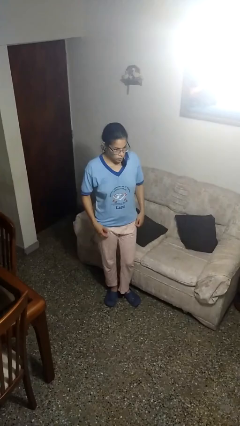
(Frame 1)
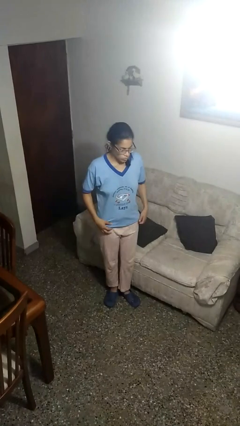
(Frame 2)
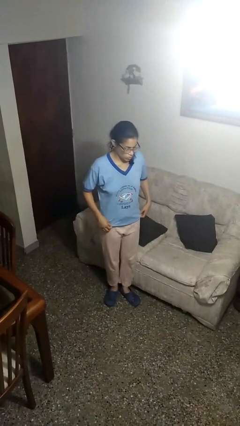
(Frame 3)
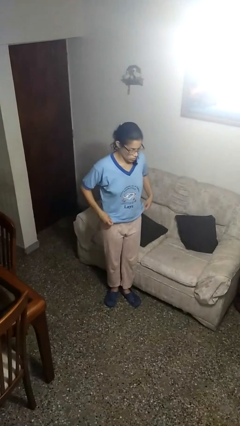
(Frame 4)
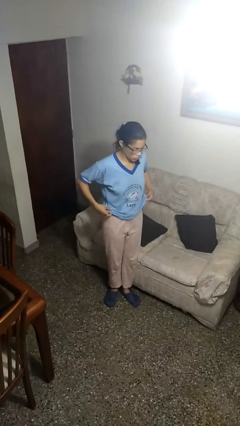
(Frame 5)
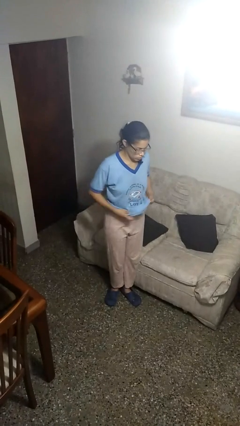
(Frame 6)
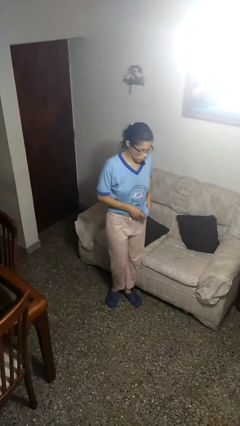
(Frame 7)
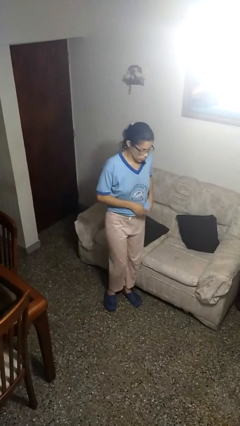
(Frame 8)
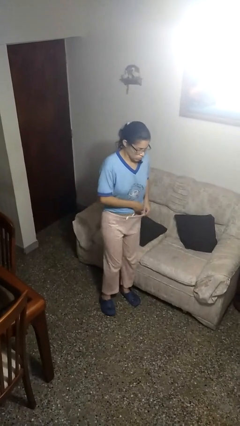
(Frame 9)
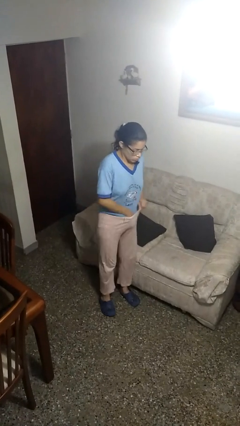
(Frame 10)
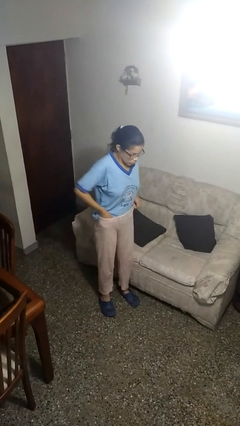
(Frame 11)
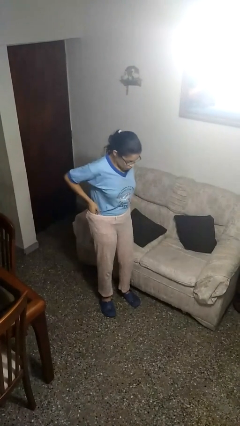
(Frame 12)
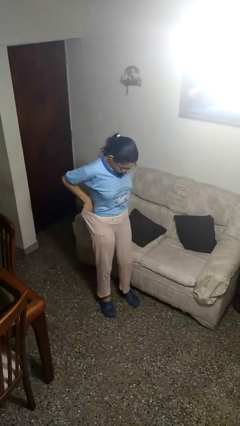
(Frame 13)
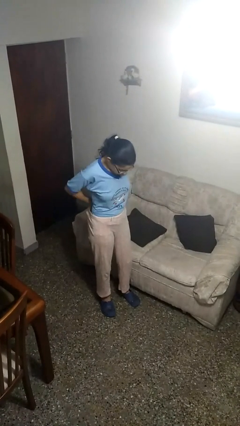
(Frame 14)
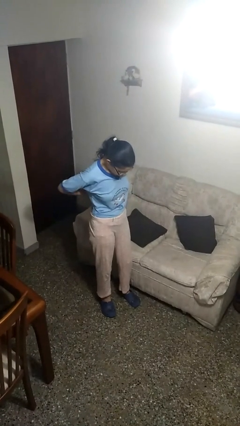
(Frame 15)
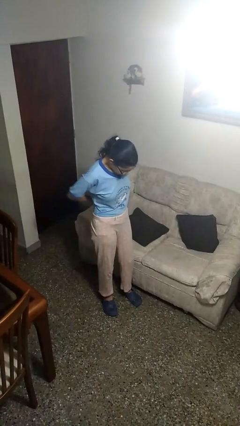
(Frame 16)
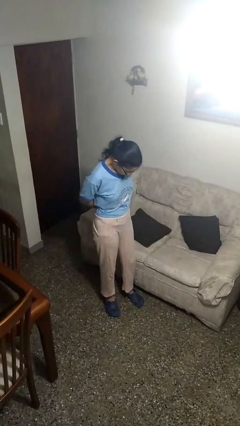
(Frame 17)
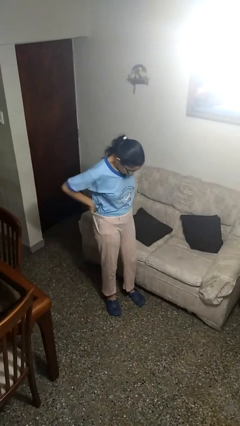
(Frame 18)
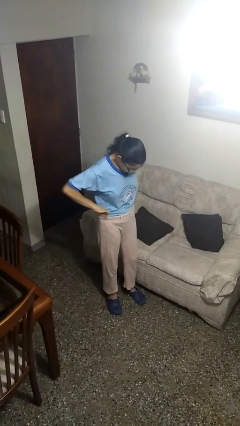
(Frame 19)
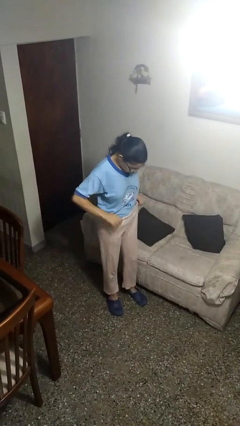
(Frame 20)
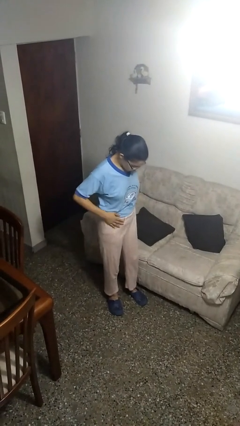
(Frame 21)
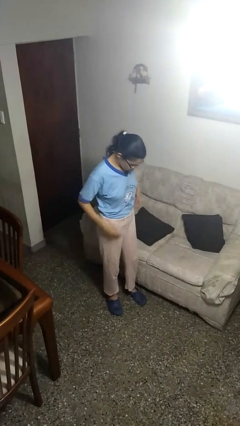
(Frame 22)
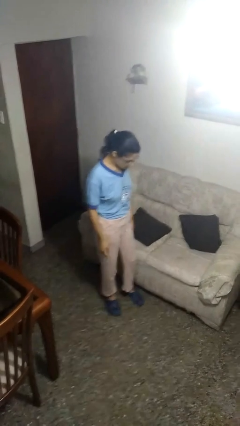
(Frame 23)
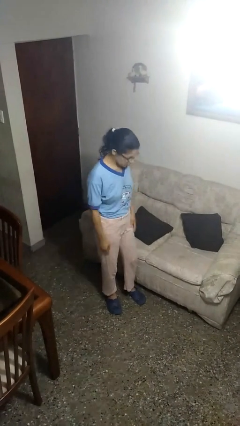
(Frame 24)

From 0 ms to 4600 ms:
person tucks in shirt

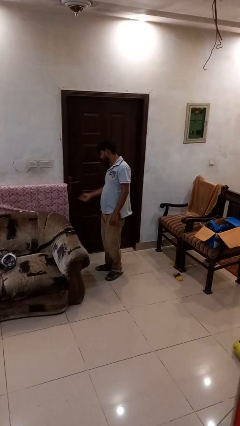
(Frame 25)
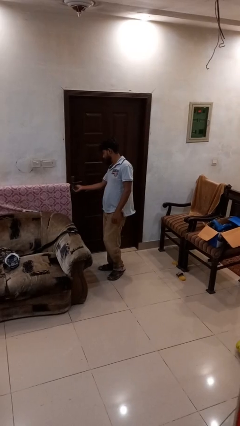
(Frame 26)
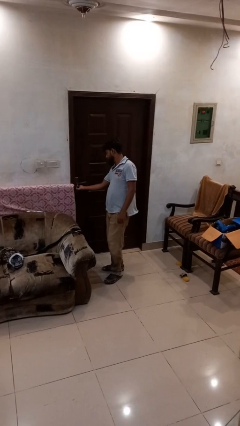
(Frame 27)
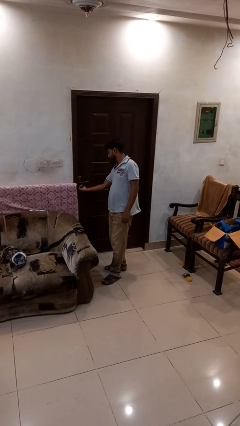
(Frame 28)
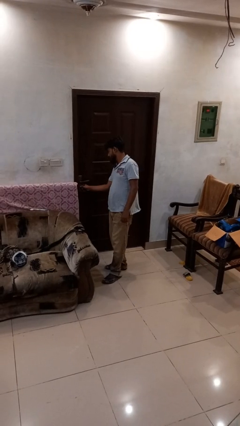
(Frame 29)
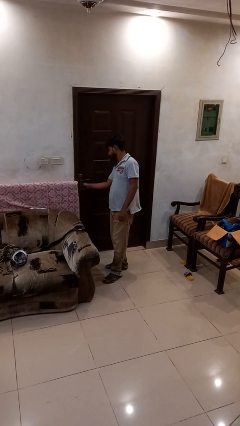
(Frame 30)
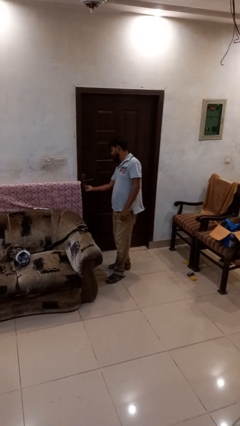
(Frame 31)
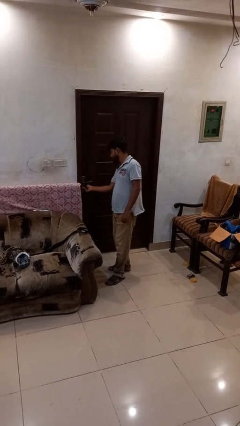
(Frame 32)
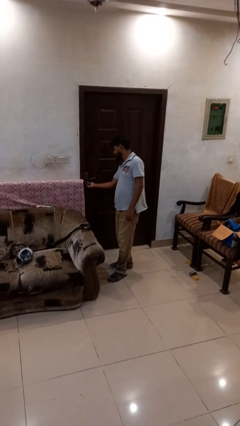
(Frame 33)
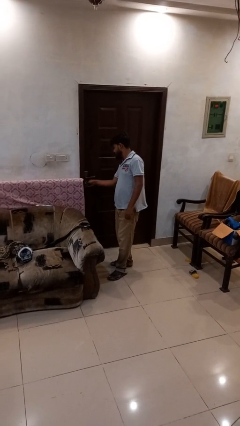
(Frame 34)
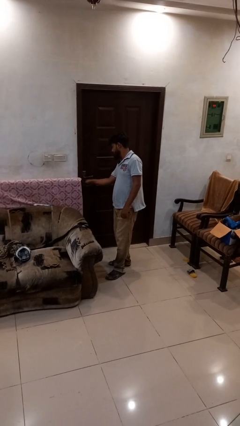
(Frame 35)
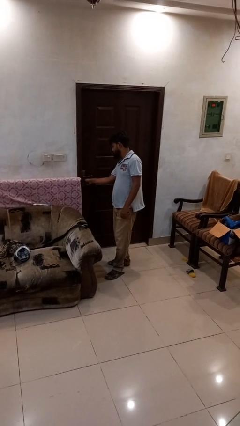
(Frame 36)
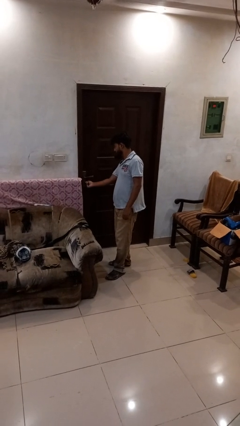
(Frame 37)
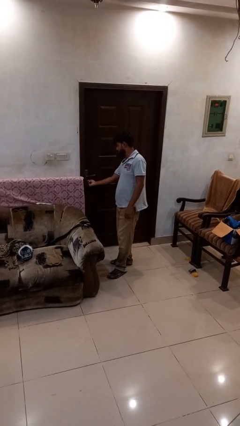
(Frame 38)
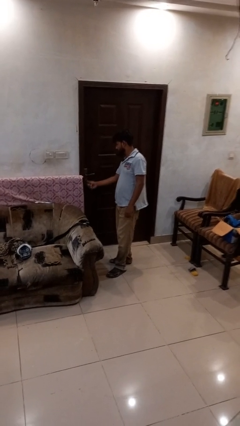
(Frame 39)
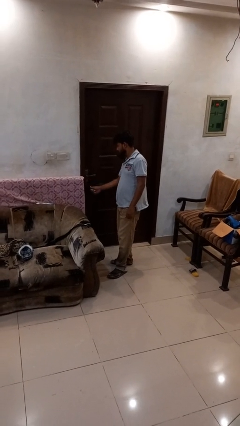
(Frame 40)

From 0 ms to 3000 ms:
person unlocks door with keys

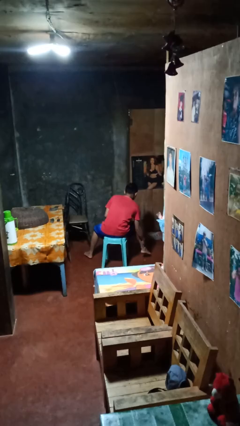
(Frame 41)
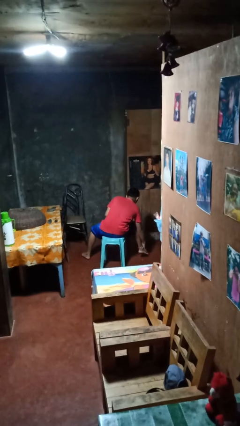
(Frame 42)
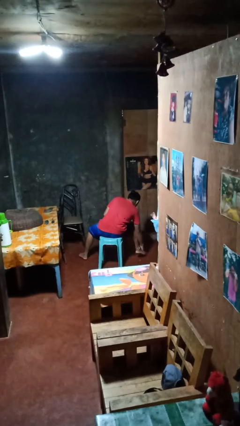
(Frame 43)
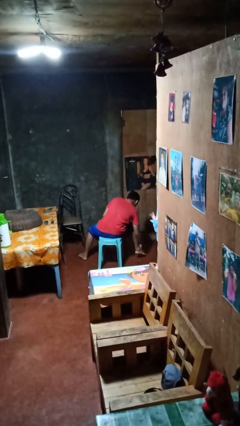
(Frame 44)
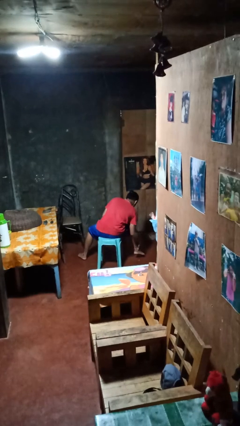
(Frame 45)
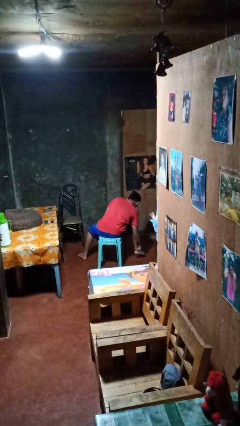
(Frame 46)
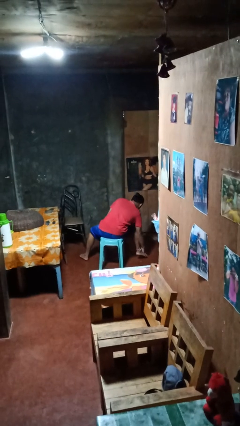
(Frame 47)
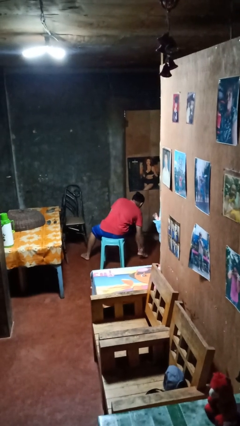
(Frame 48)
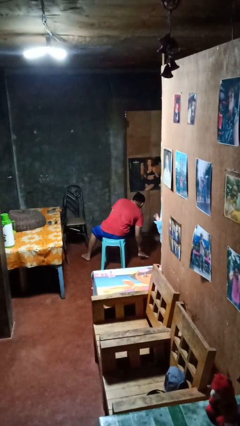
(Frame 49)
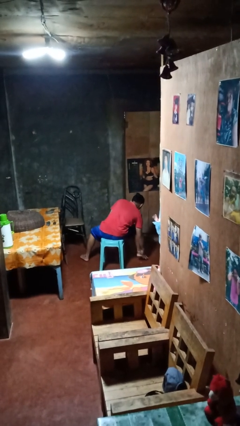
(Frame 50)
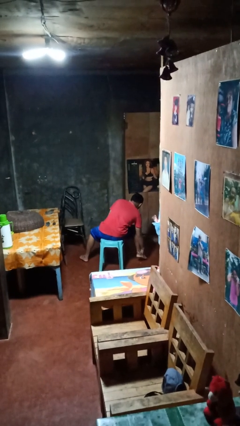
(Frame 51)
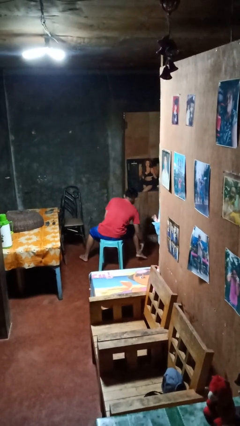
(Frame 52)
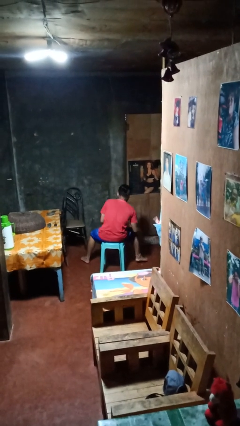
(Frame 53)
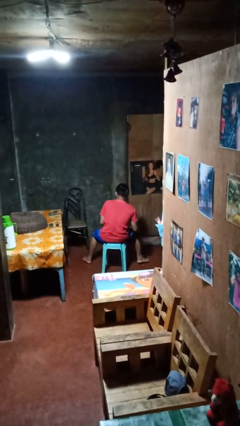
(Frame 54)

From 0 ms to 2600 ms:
person rubs foot

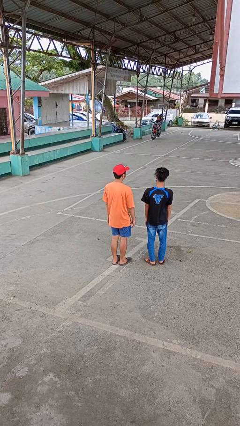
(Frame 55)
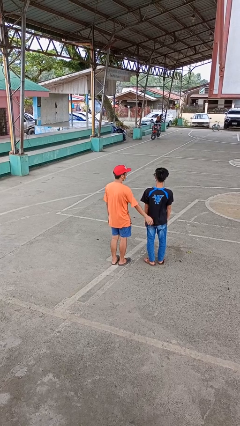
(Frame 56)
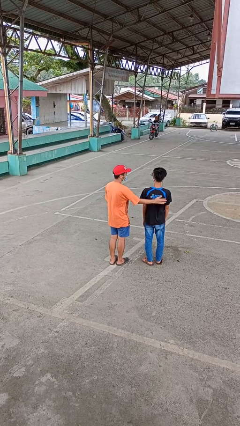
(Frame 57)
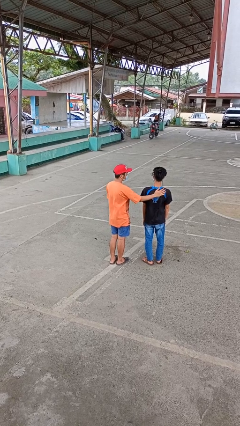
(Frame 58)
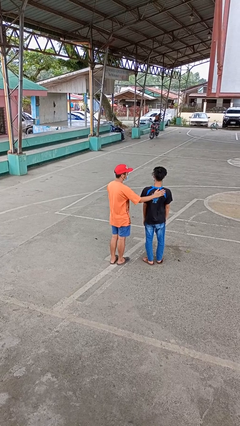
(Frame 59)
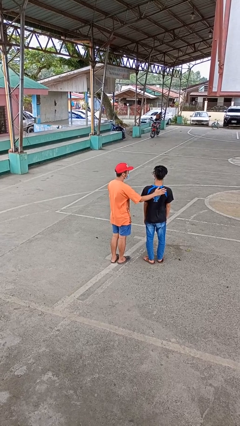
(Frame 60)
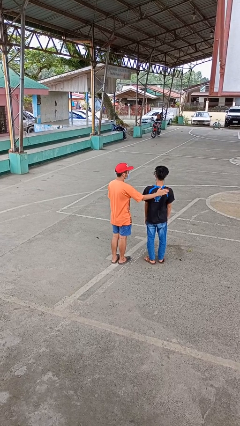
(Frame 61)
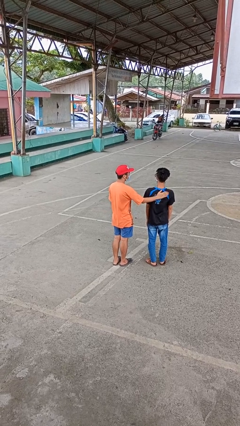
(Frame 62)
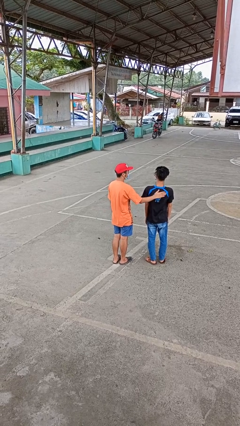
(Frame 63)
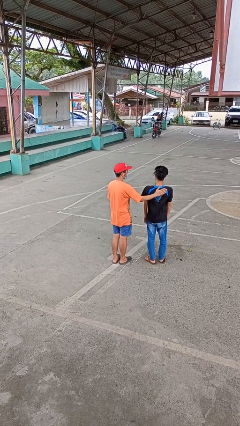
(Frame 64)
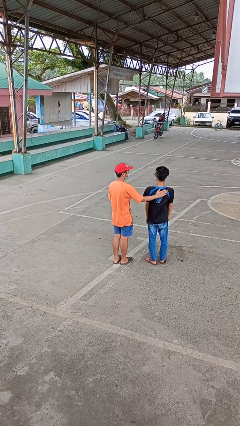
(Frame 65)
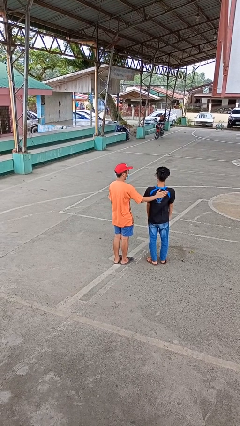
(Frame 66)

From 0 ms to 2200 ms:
person touches back of person

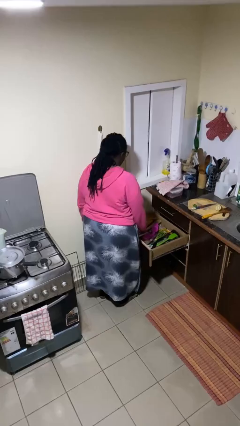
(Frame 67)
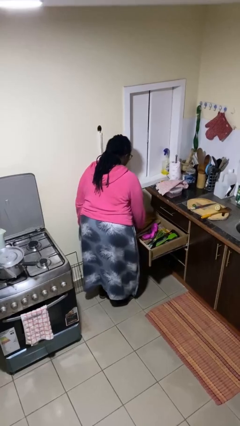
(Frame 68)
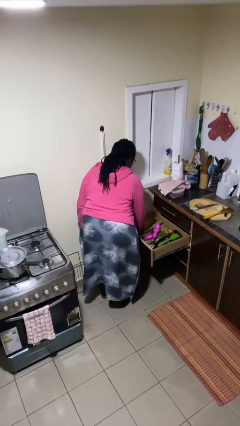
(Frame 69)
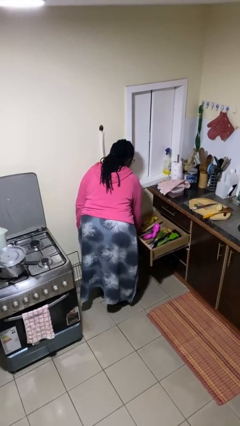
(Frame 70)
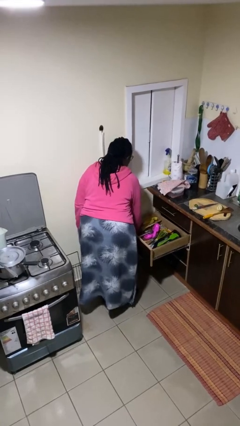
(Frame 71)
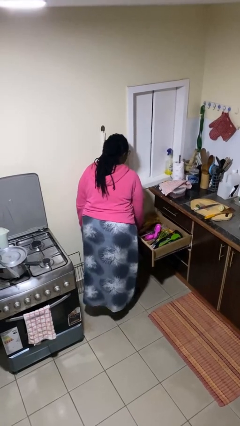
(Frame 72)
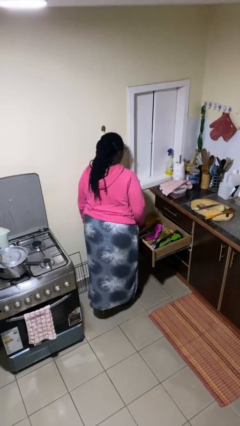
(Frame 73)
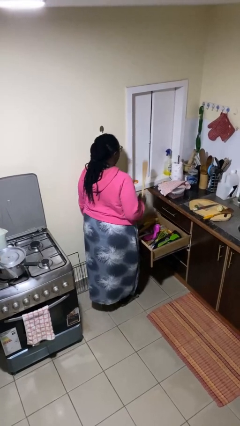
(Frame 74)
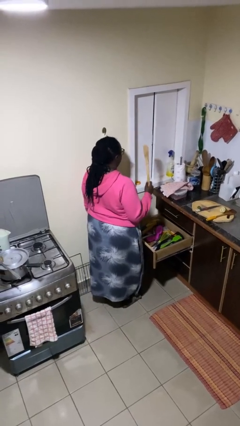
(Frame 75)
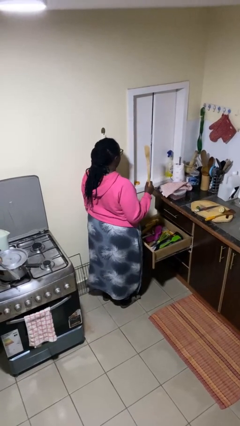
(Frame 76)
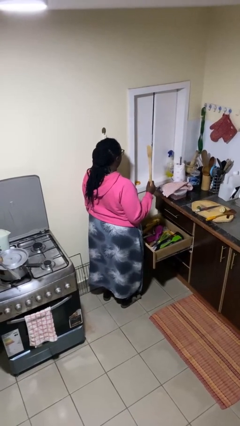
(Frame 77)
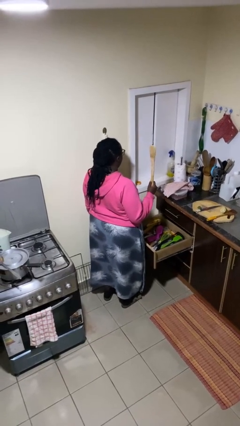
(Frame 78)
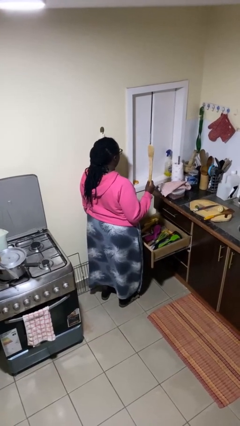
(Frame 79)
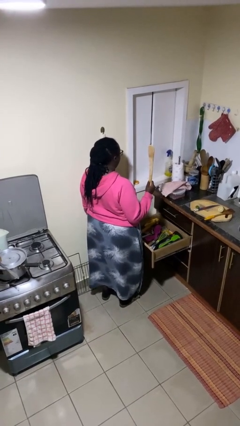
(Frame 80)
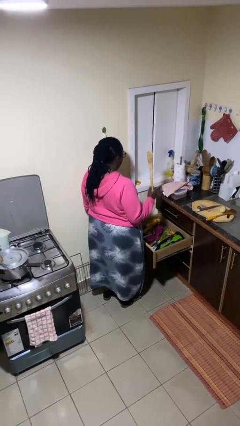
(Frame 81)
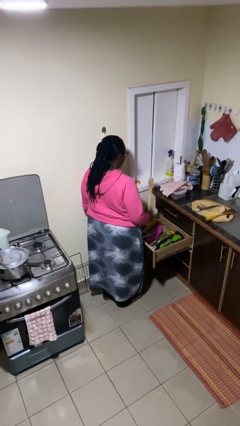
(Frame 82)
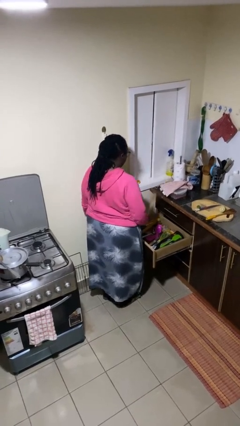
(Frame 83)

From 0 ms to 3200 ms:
person takes object from kitchen drawer

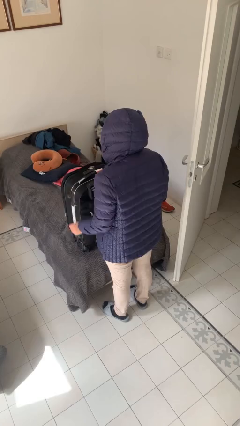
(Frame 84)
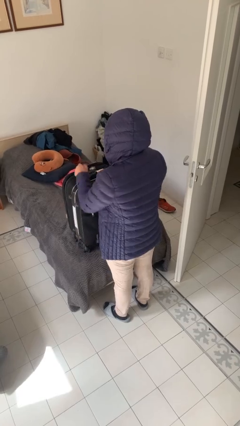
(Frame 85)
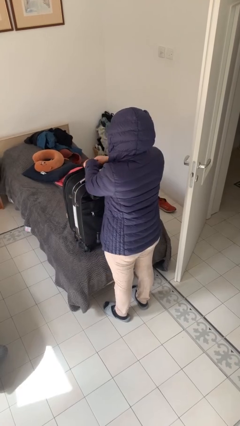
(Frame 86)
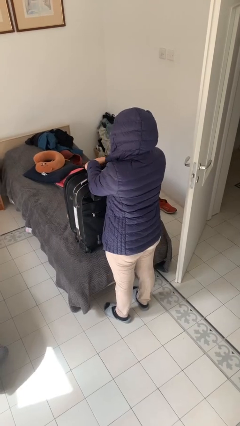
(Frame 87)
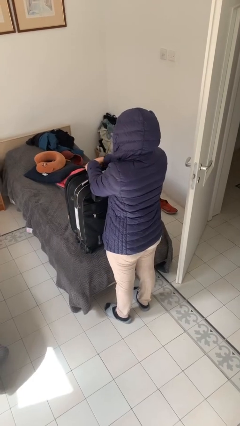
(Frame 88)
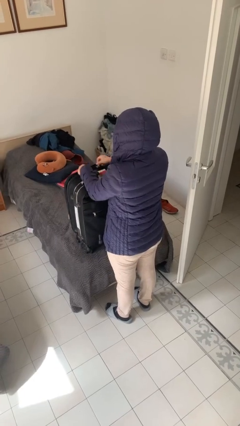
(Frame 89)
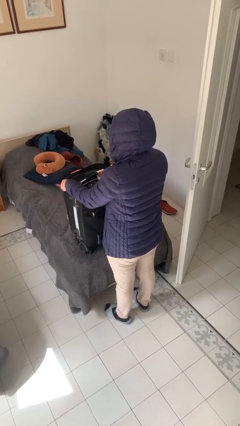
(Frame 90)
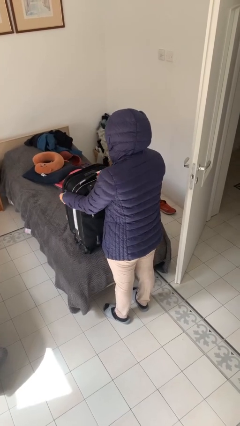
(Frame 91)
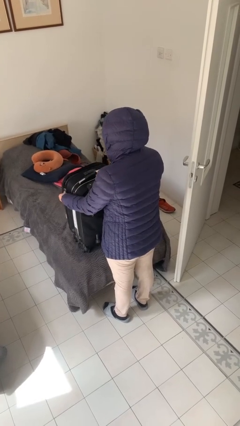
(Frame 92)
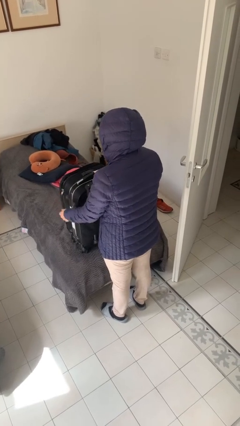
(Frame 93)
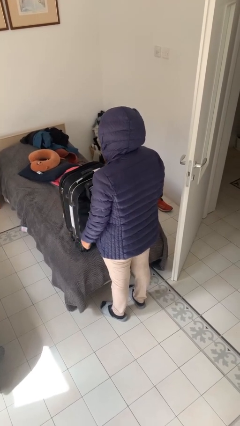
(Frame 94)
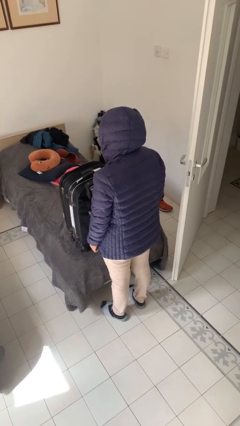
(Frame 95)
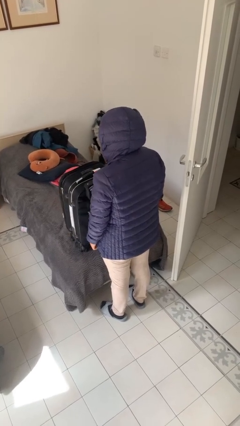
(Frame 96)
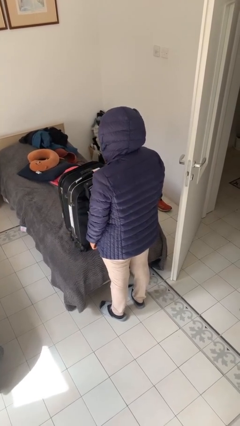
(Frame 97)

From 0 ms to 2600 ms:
person opens suitcase
